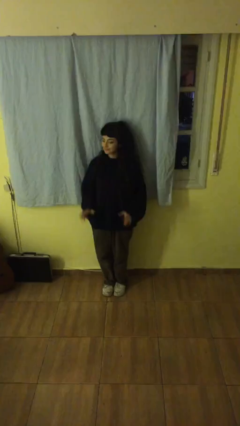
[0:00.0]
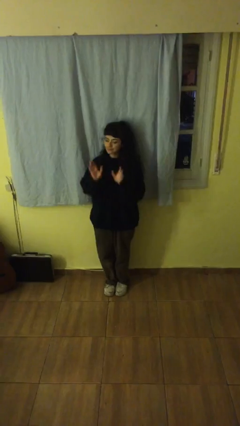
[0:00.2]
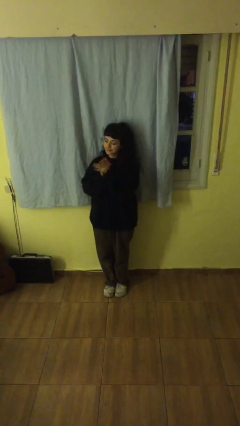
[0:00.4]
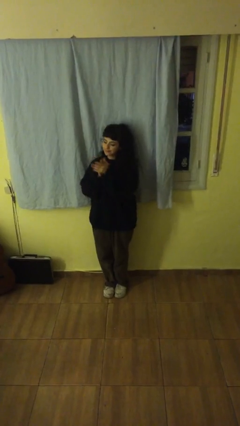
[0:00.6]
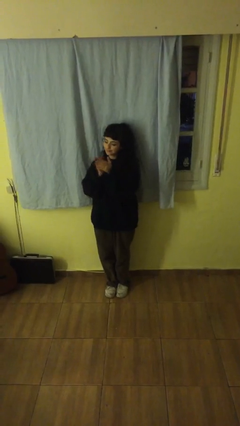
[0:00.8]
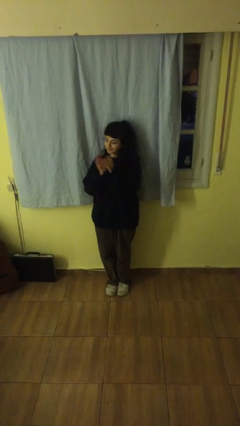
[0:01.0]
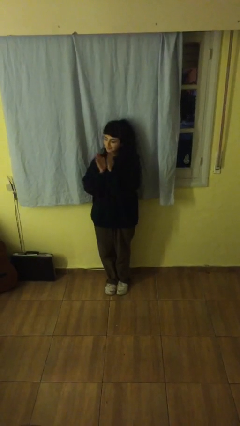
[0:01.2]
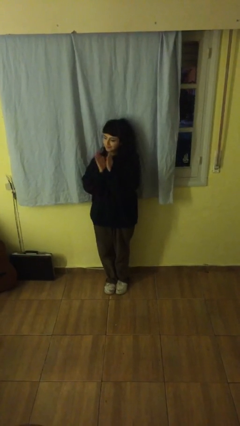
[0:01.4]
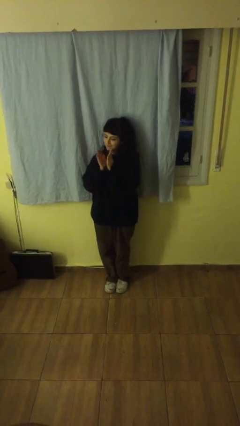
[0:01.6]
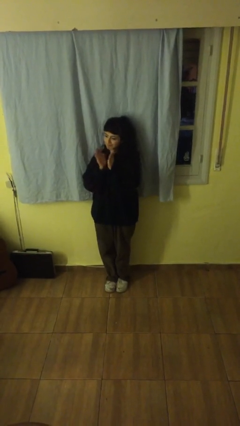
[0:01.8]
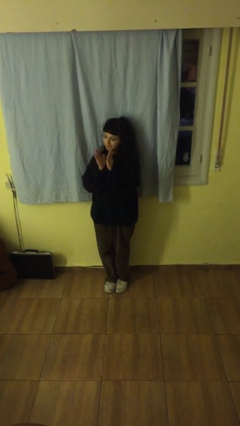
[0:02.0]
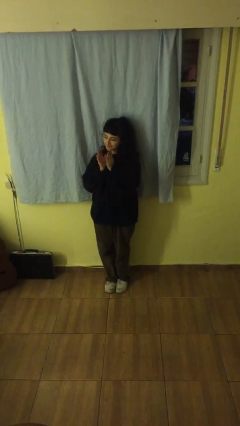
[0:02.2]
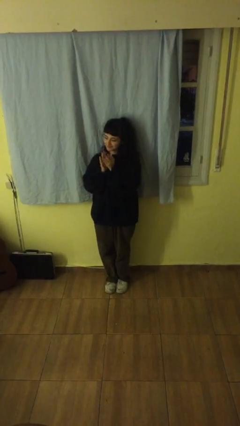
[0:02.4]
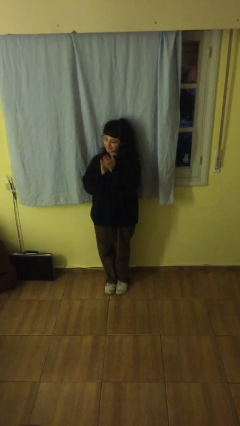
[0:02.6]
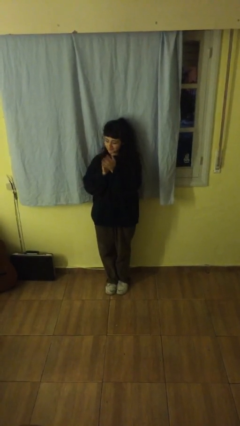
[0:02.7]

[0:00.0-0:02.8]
person claps hands

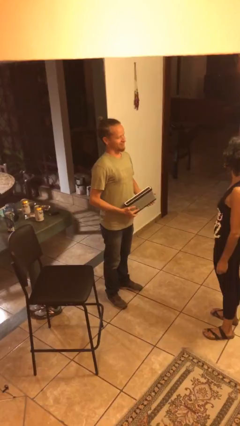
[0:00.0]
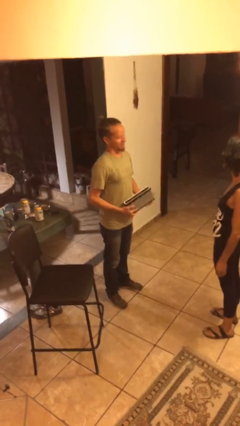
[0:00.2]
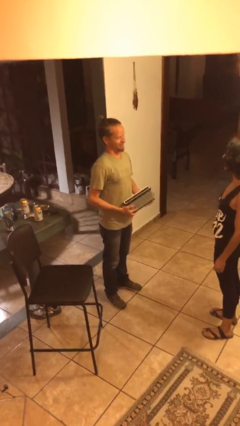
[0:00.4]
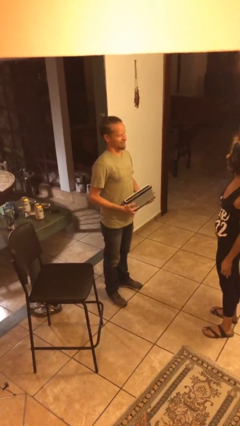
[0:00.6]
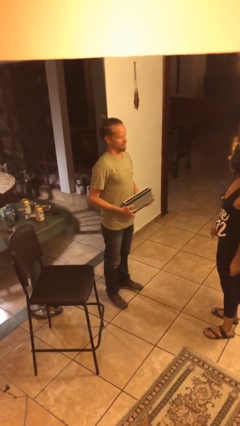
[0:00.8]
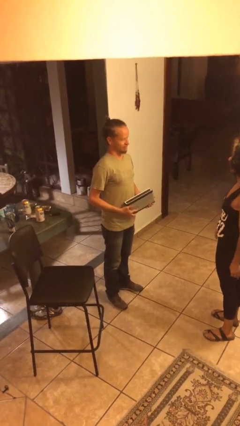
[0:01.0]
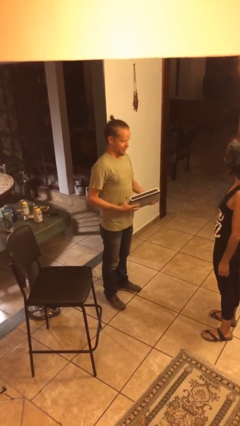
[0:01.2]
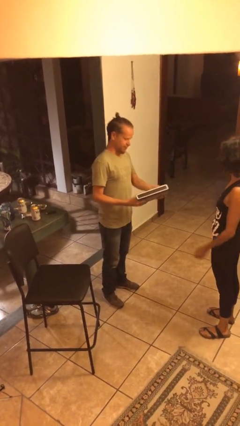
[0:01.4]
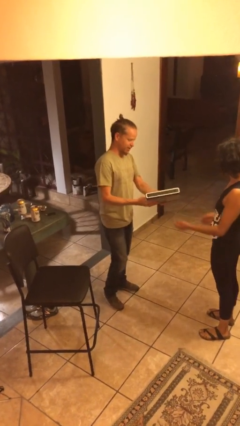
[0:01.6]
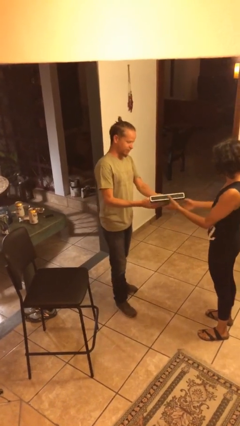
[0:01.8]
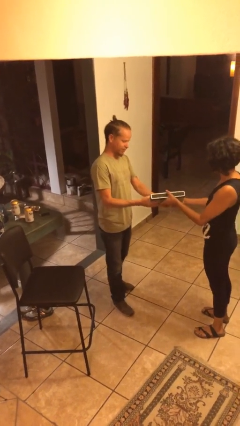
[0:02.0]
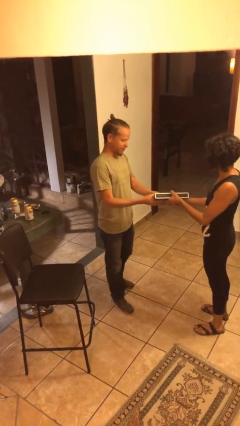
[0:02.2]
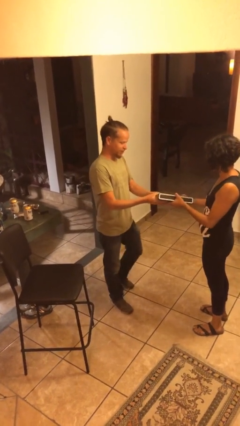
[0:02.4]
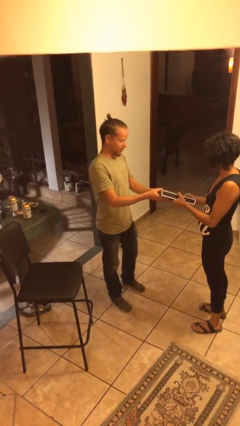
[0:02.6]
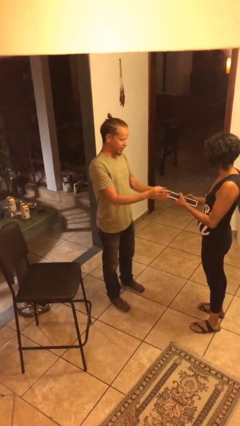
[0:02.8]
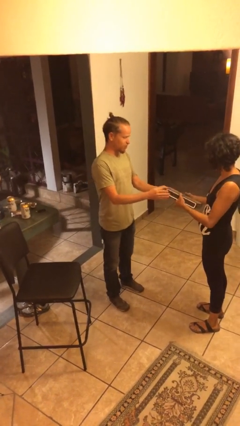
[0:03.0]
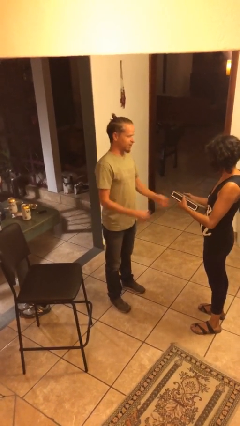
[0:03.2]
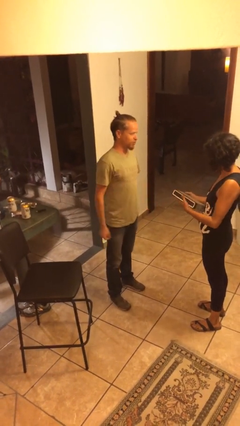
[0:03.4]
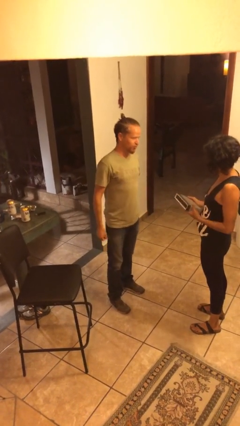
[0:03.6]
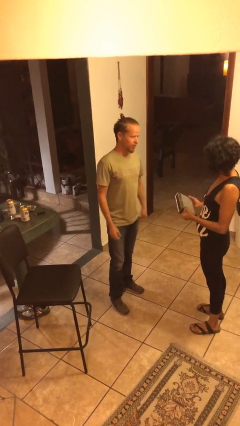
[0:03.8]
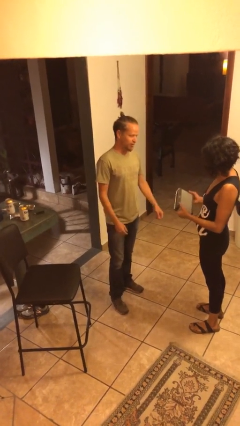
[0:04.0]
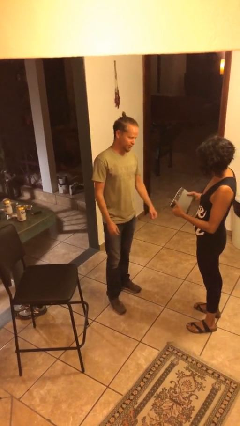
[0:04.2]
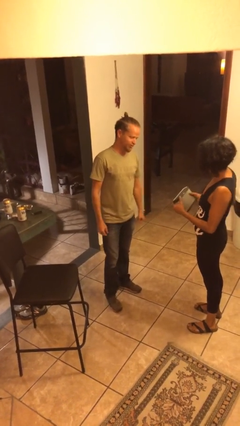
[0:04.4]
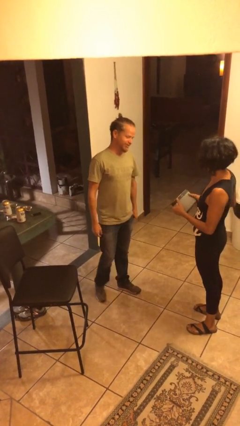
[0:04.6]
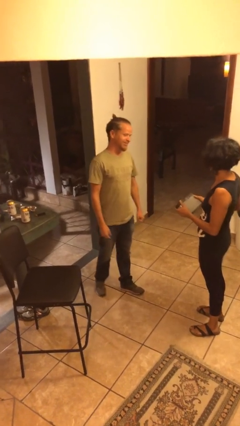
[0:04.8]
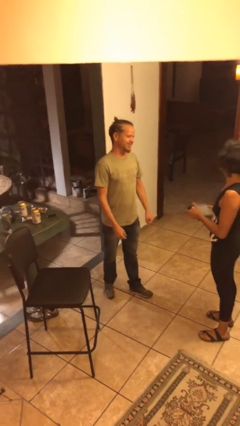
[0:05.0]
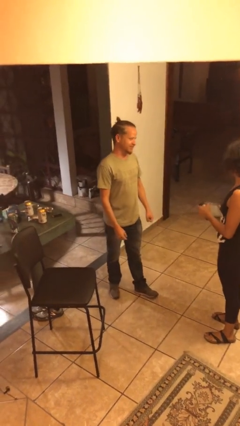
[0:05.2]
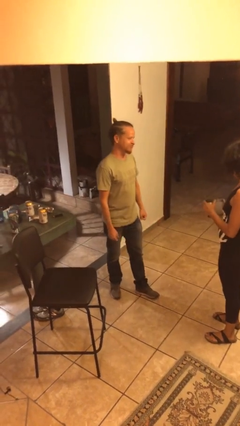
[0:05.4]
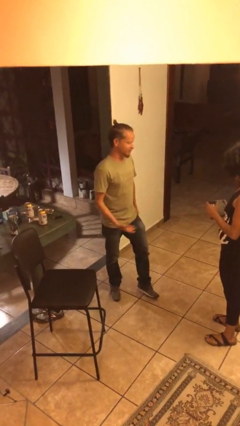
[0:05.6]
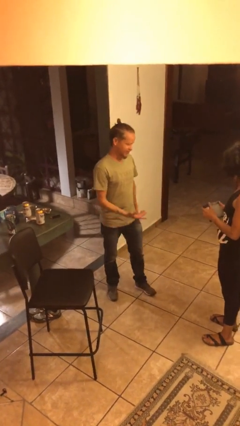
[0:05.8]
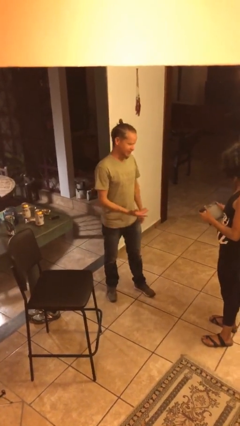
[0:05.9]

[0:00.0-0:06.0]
person transfers object to person

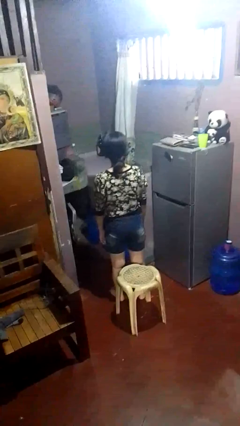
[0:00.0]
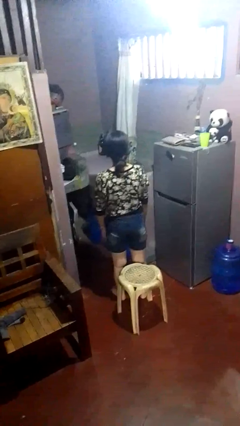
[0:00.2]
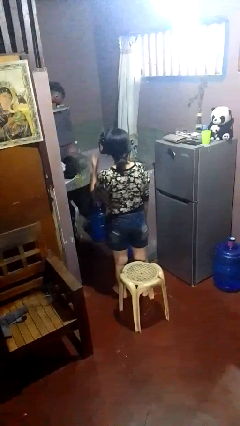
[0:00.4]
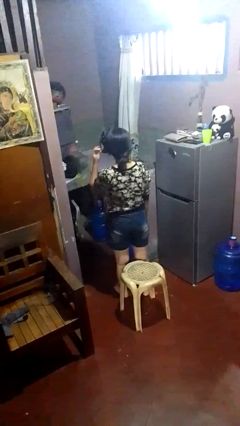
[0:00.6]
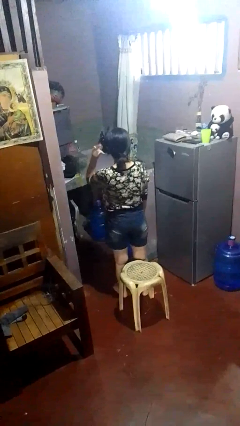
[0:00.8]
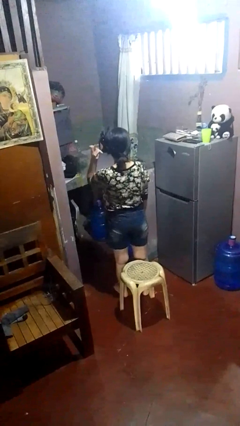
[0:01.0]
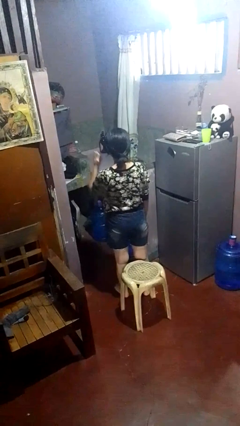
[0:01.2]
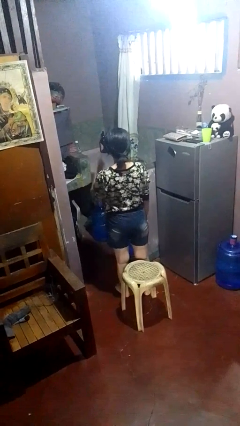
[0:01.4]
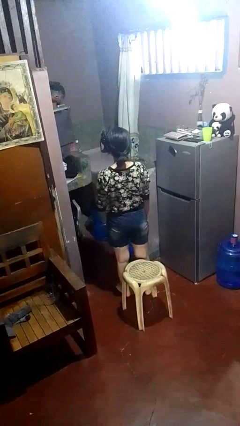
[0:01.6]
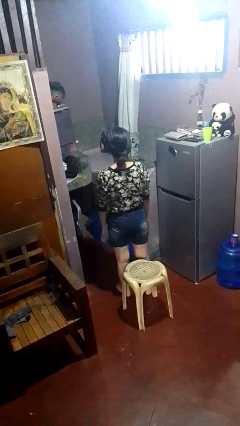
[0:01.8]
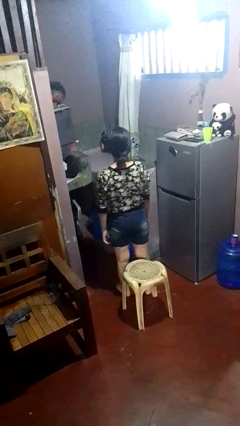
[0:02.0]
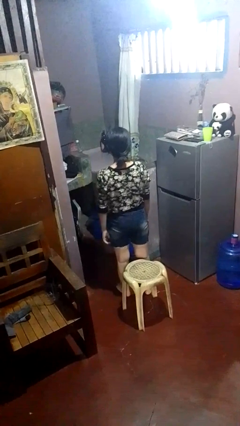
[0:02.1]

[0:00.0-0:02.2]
person snaps fingers

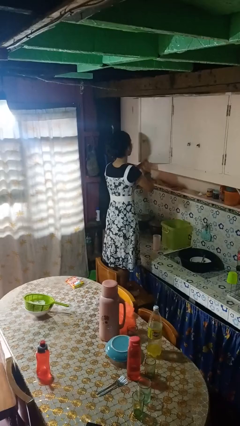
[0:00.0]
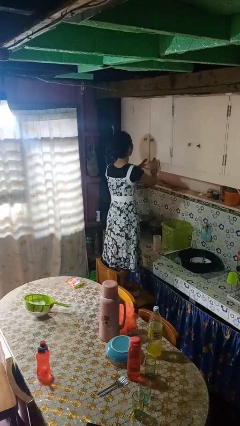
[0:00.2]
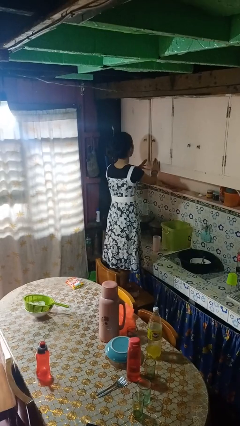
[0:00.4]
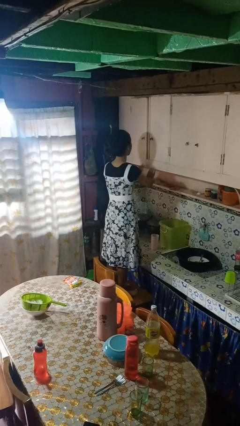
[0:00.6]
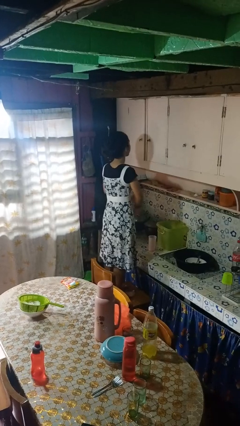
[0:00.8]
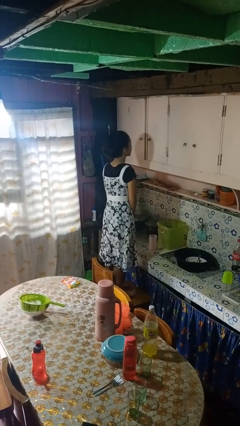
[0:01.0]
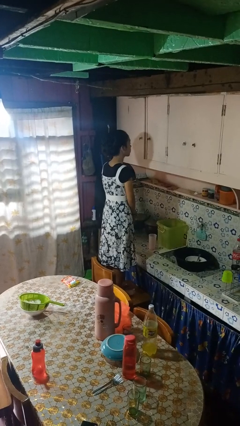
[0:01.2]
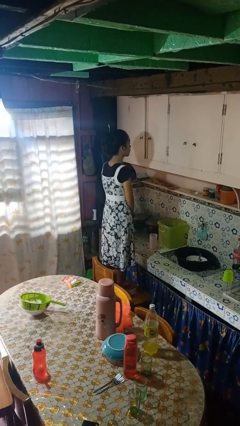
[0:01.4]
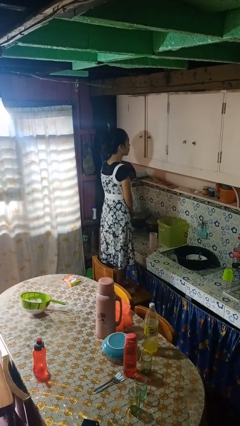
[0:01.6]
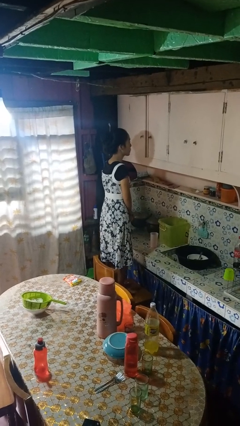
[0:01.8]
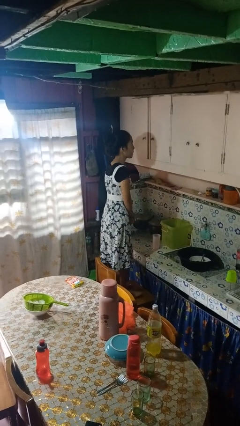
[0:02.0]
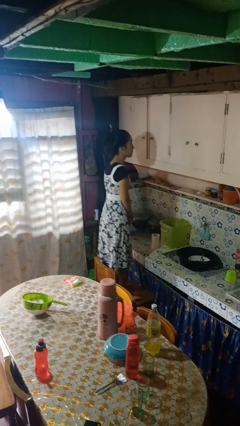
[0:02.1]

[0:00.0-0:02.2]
person closes cabinet

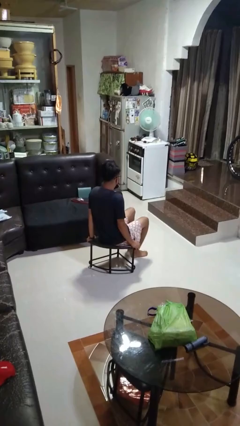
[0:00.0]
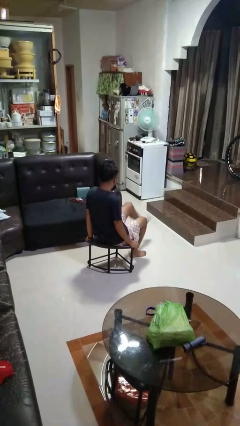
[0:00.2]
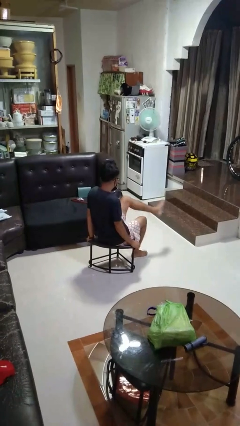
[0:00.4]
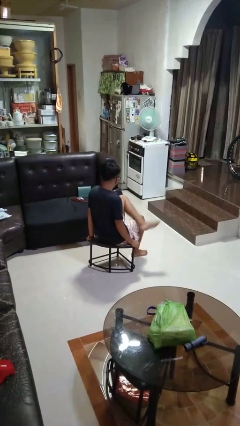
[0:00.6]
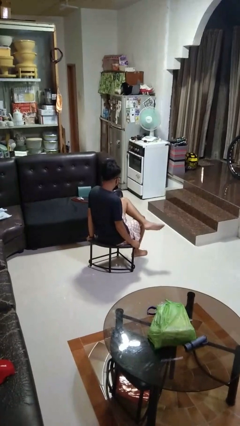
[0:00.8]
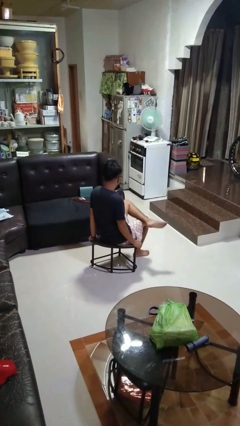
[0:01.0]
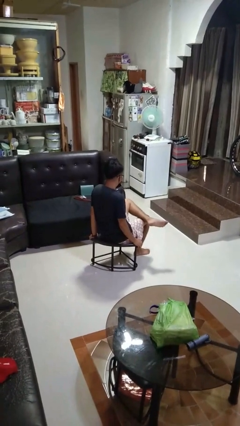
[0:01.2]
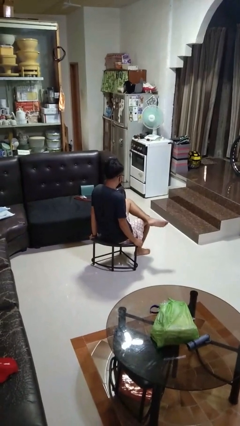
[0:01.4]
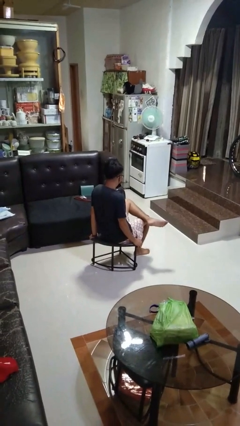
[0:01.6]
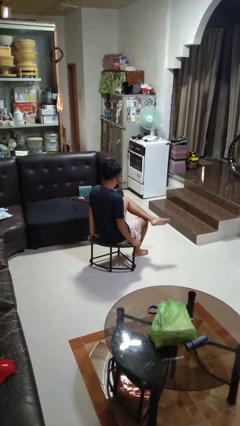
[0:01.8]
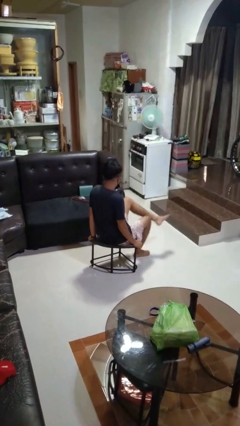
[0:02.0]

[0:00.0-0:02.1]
person crosses legs

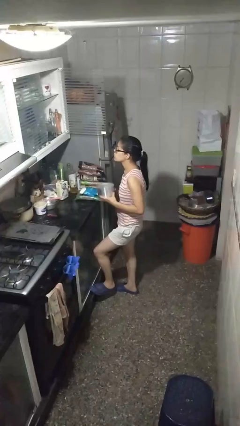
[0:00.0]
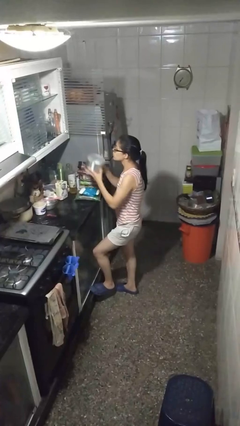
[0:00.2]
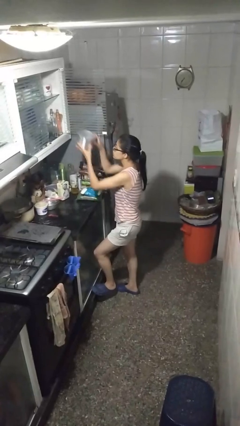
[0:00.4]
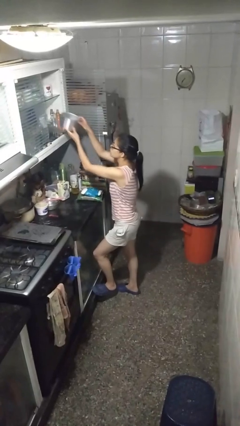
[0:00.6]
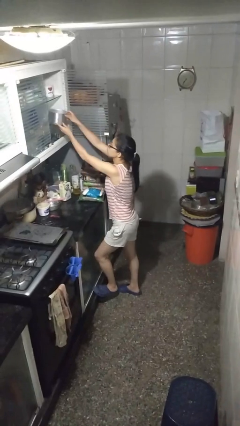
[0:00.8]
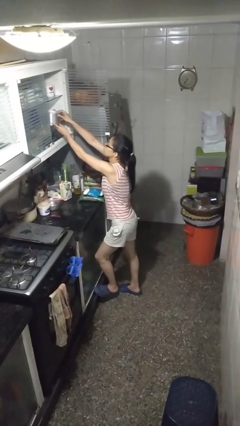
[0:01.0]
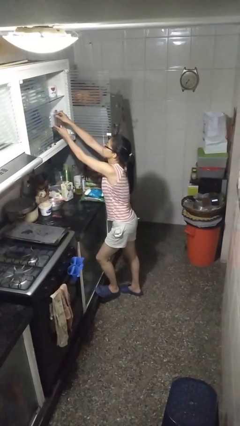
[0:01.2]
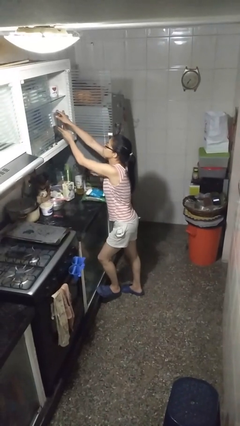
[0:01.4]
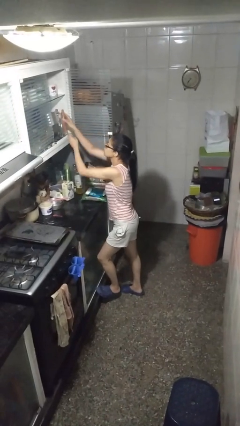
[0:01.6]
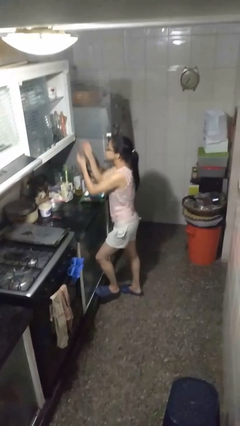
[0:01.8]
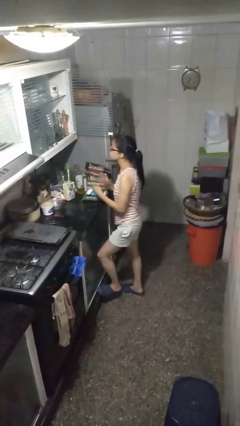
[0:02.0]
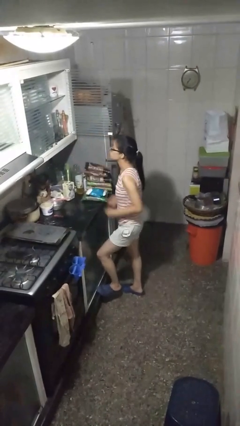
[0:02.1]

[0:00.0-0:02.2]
person puts down object into cabinet

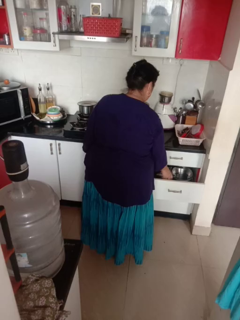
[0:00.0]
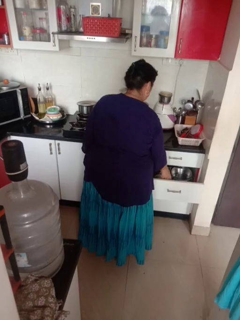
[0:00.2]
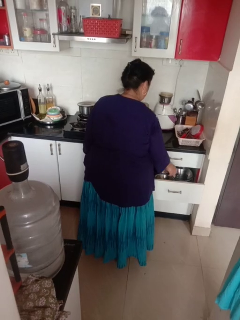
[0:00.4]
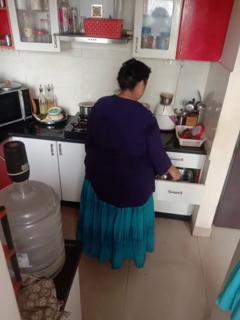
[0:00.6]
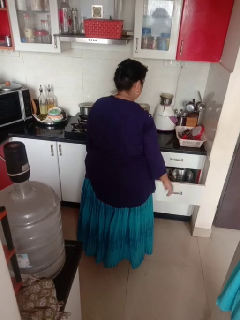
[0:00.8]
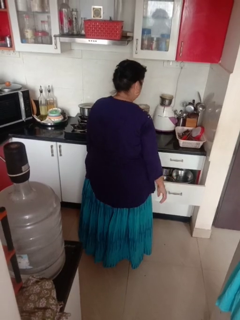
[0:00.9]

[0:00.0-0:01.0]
person puts object into kitchen drawer
